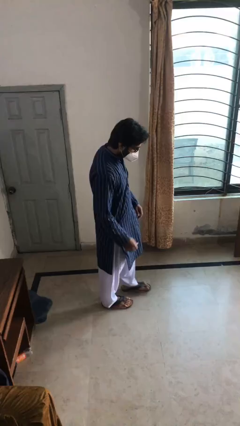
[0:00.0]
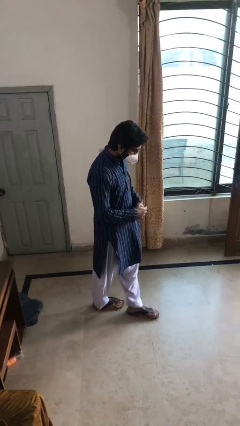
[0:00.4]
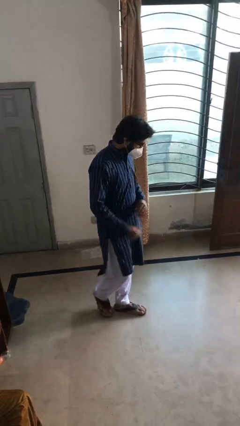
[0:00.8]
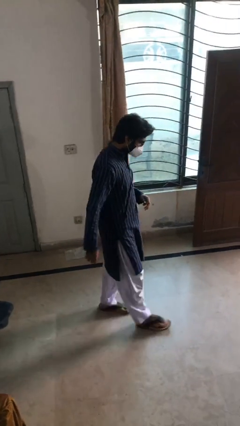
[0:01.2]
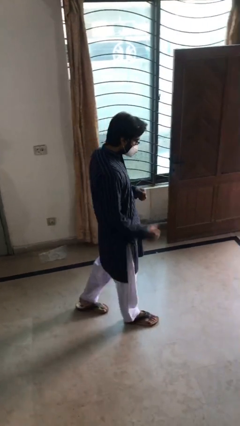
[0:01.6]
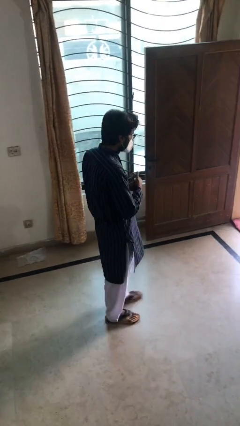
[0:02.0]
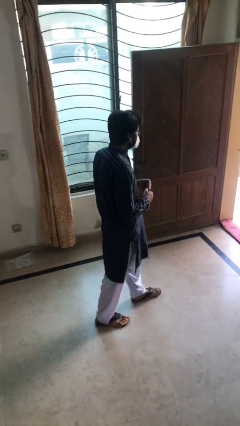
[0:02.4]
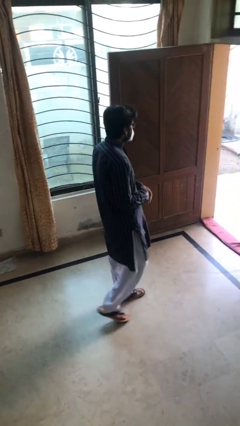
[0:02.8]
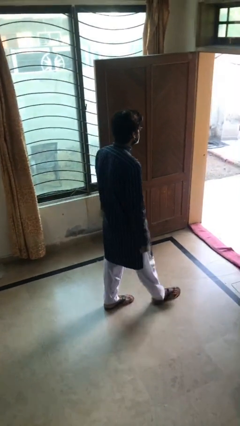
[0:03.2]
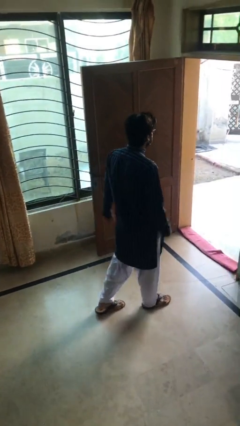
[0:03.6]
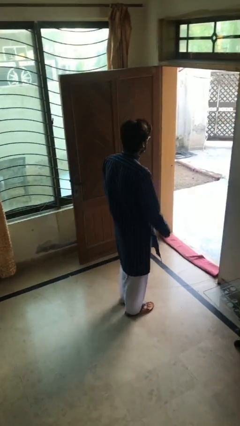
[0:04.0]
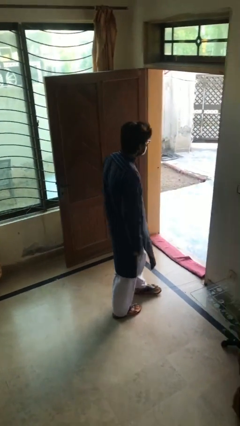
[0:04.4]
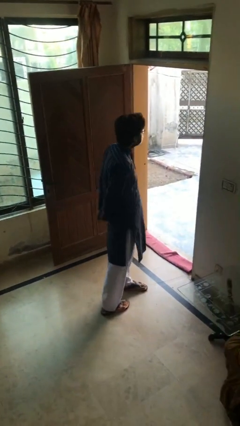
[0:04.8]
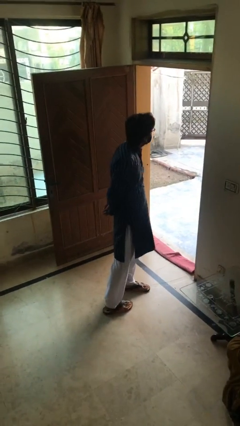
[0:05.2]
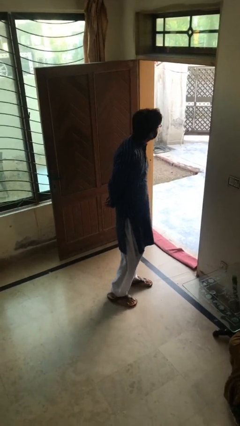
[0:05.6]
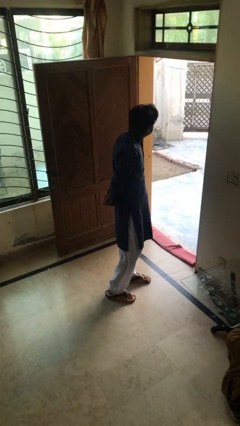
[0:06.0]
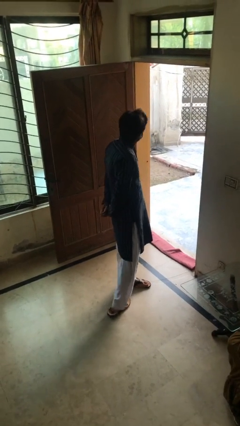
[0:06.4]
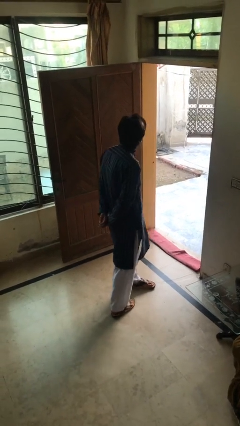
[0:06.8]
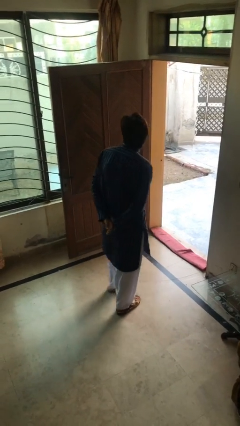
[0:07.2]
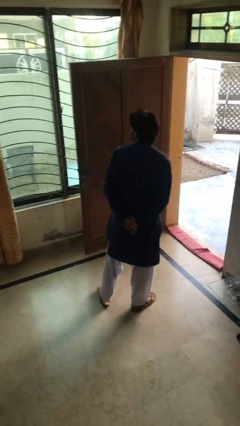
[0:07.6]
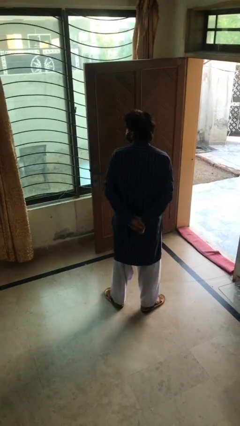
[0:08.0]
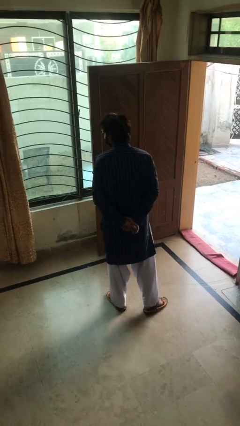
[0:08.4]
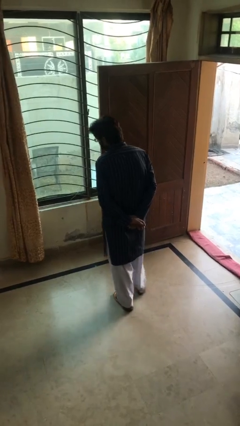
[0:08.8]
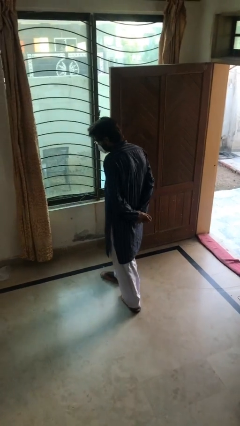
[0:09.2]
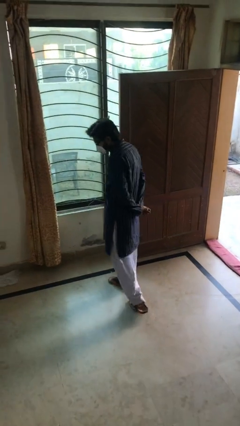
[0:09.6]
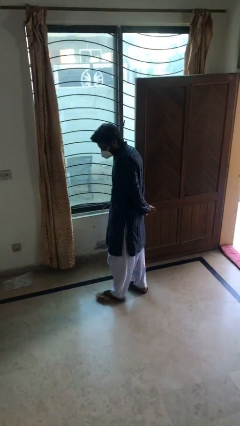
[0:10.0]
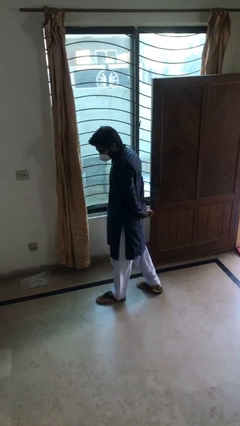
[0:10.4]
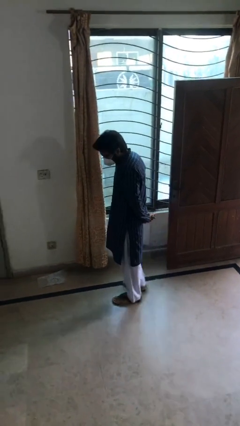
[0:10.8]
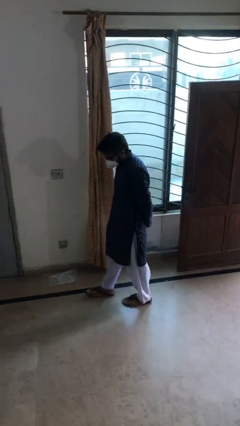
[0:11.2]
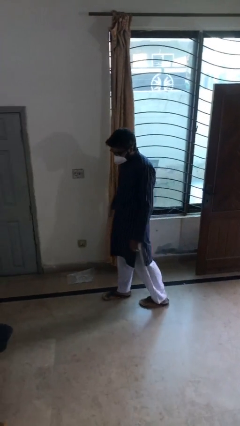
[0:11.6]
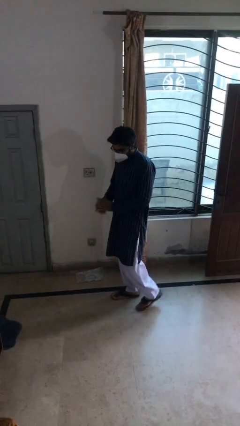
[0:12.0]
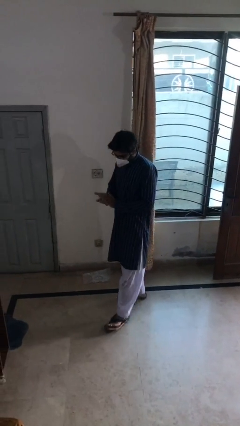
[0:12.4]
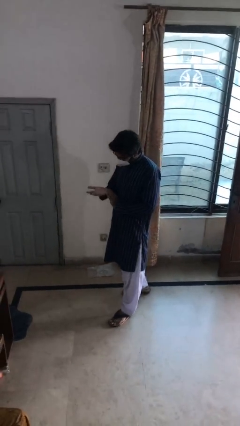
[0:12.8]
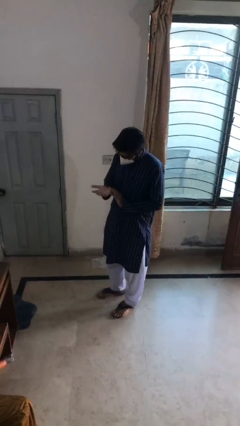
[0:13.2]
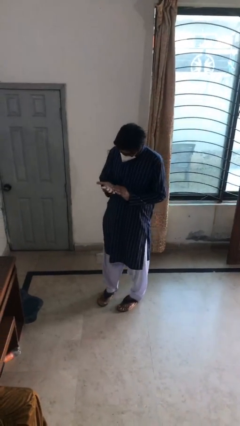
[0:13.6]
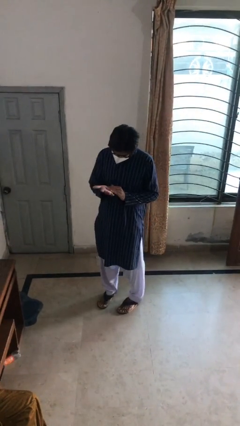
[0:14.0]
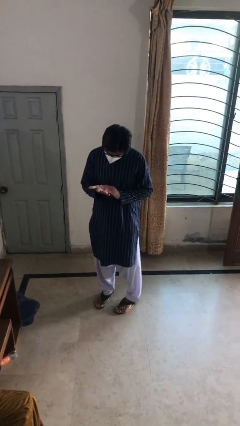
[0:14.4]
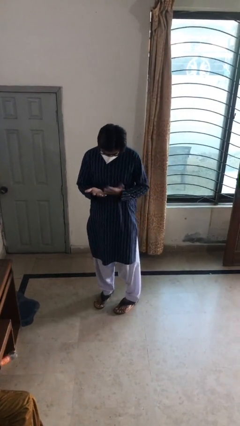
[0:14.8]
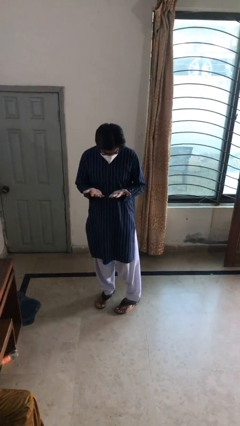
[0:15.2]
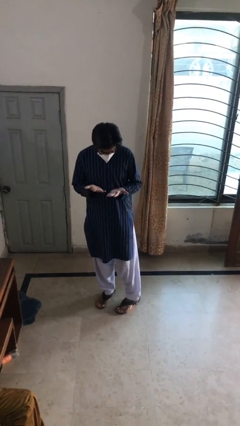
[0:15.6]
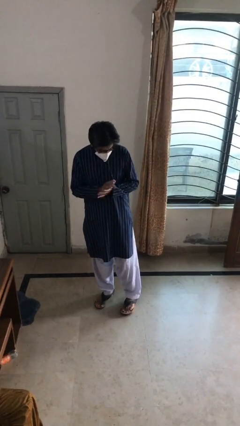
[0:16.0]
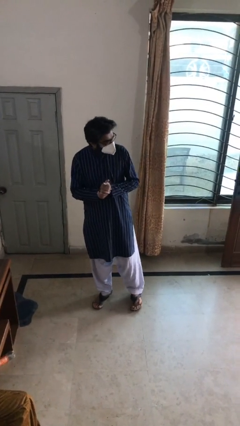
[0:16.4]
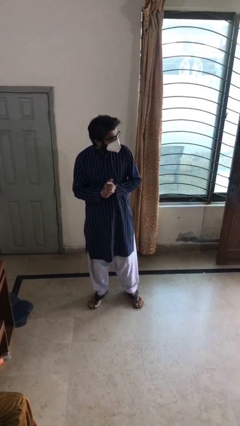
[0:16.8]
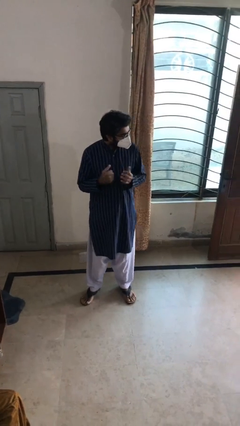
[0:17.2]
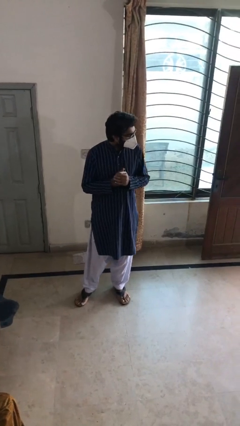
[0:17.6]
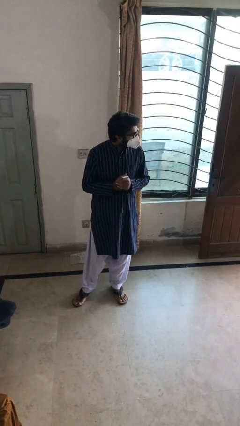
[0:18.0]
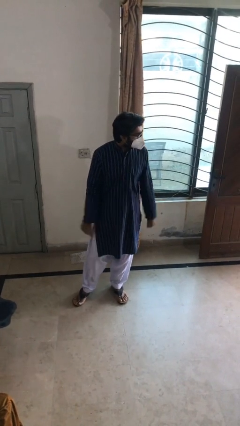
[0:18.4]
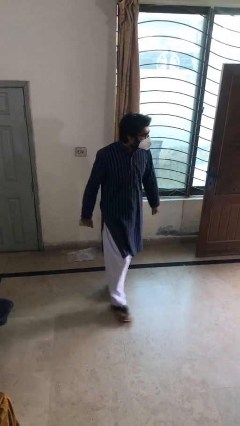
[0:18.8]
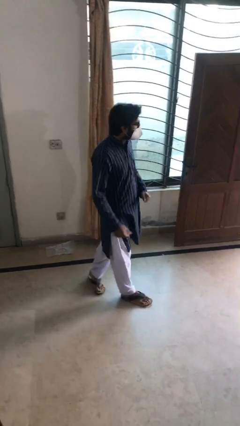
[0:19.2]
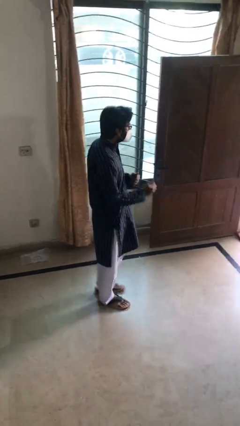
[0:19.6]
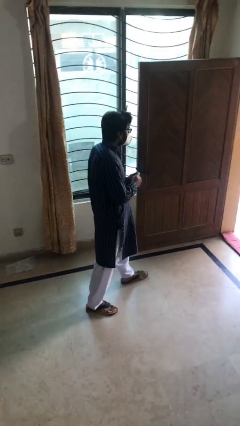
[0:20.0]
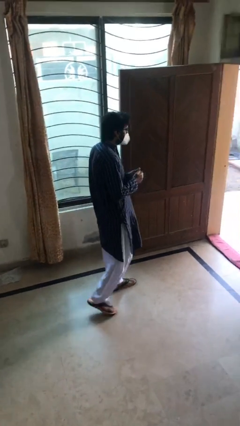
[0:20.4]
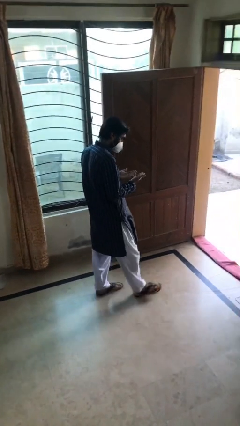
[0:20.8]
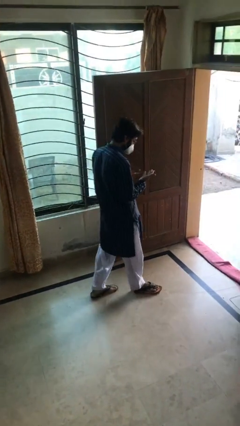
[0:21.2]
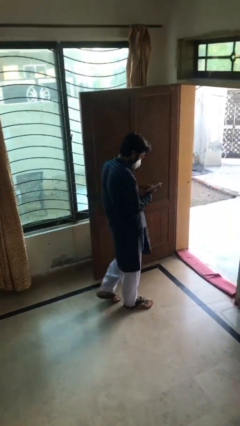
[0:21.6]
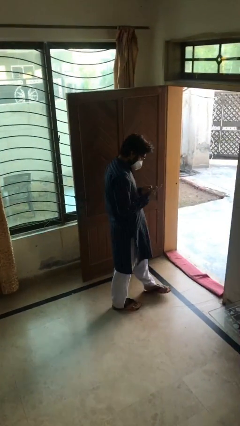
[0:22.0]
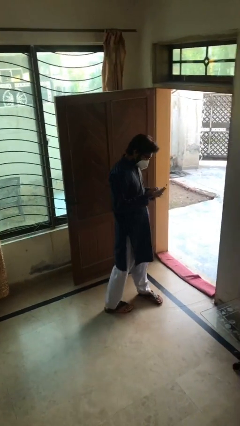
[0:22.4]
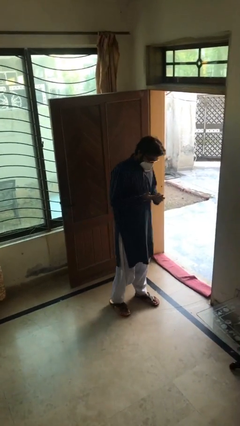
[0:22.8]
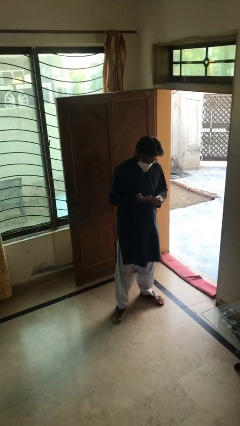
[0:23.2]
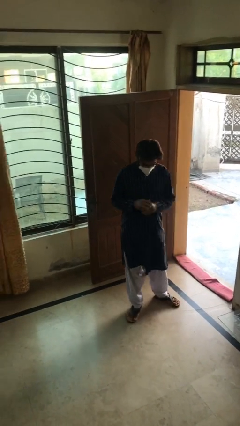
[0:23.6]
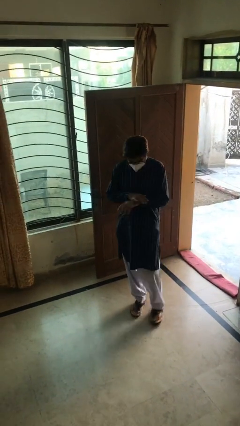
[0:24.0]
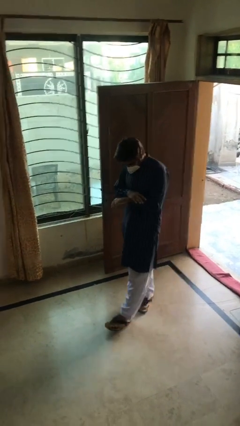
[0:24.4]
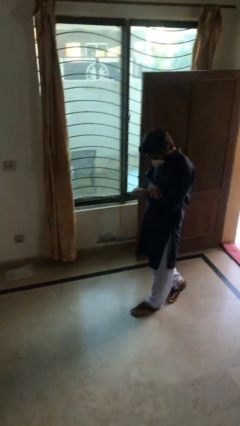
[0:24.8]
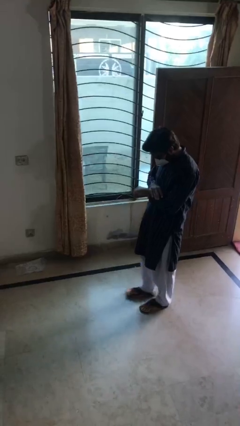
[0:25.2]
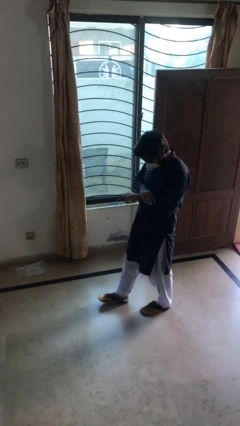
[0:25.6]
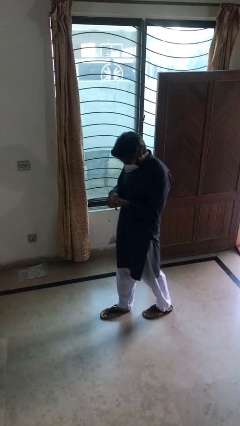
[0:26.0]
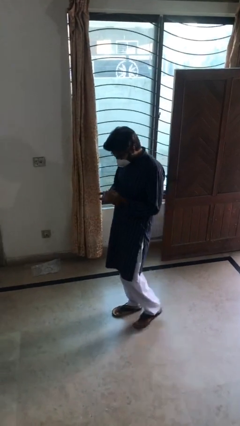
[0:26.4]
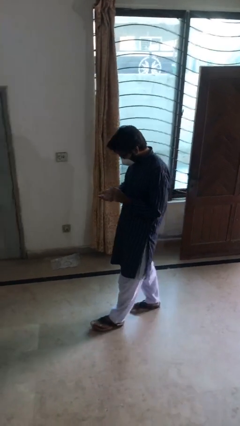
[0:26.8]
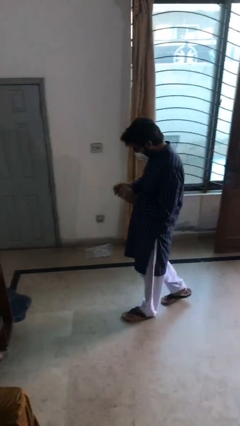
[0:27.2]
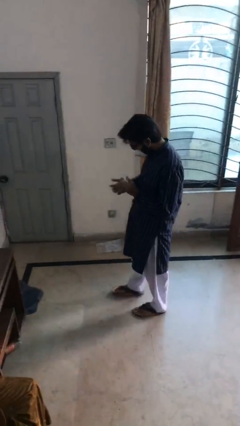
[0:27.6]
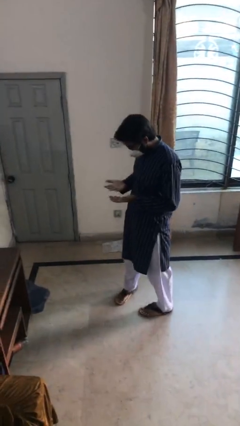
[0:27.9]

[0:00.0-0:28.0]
person walks

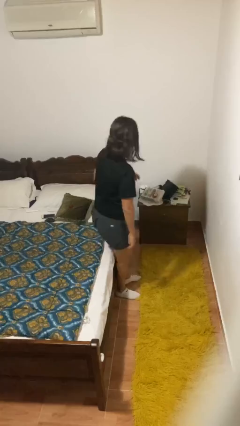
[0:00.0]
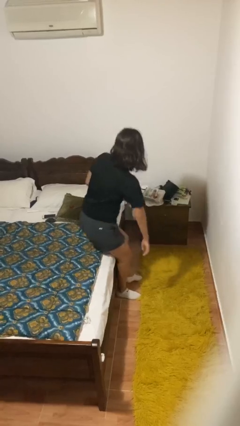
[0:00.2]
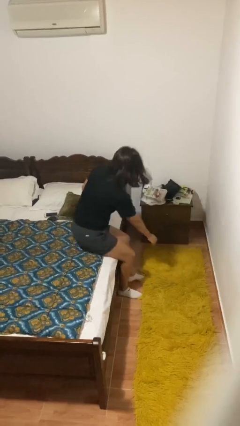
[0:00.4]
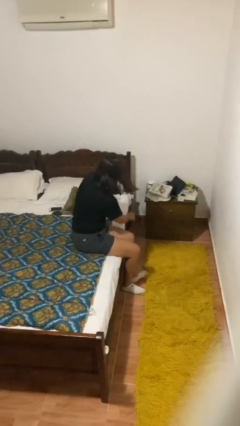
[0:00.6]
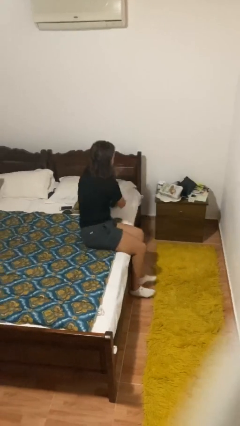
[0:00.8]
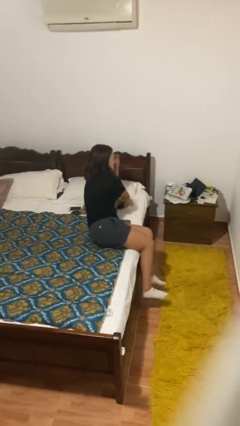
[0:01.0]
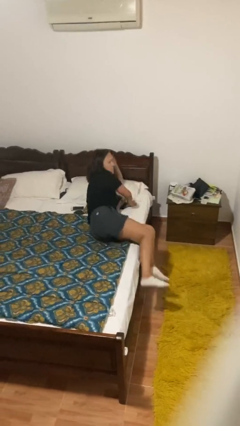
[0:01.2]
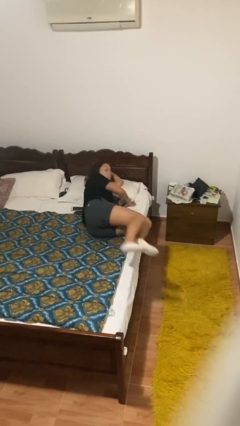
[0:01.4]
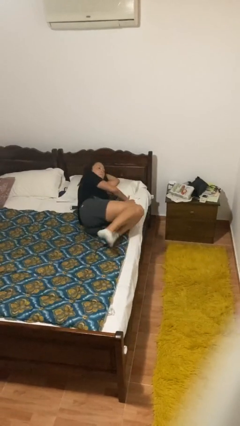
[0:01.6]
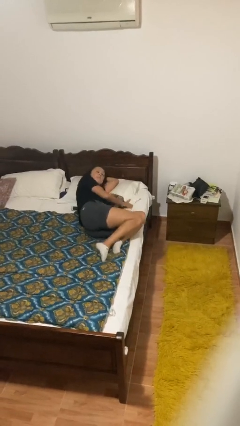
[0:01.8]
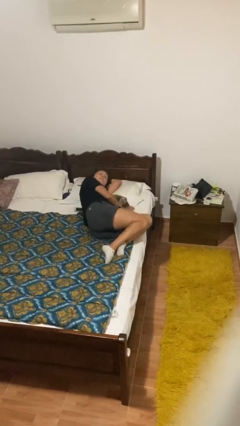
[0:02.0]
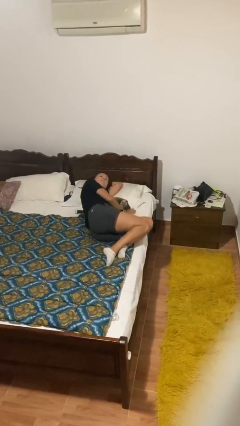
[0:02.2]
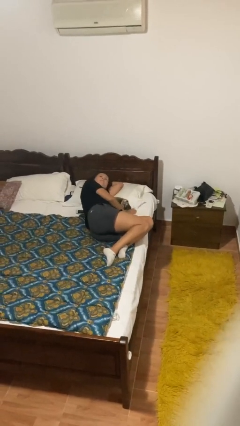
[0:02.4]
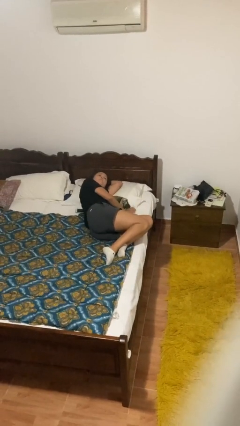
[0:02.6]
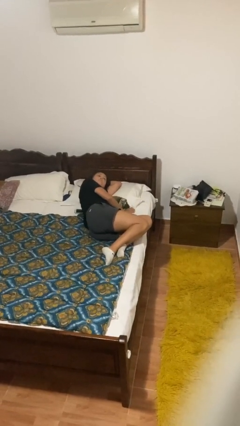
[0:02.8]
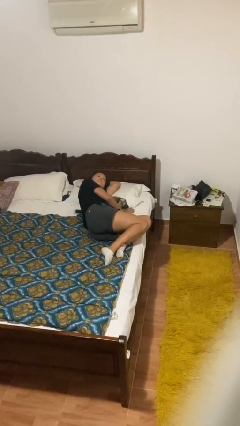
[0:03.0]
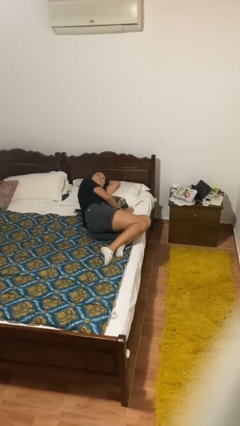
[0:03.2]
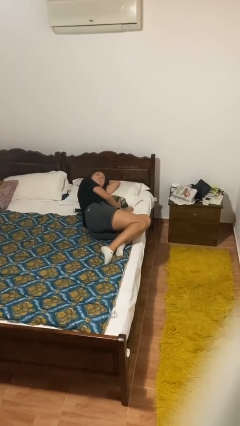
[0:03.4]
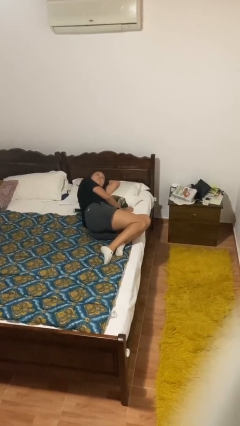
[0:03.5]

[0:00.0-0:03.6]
person lies down on bed

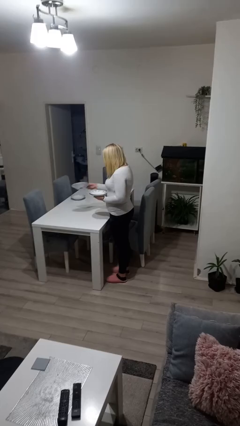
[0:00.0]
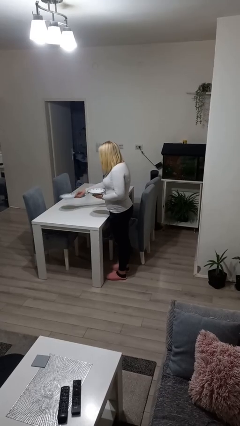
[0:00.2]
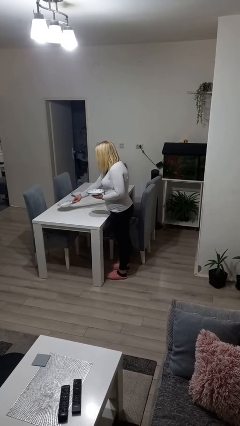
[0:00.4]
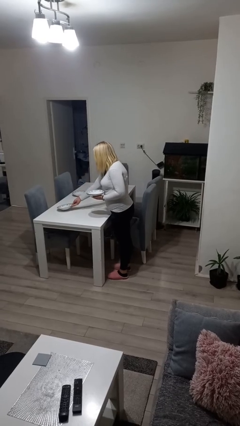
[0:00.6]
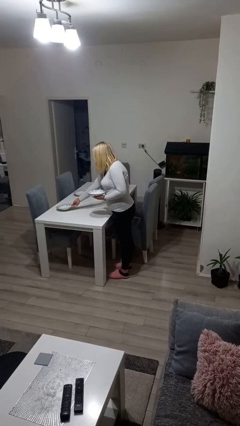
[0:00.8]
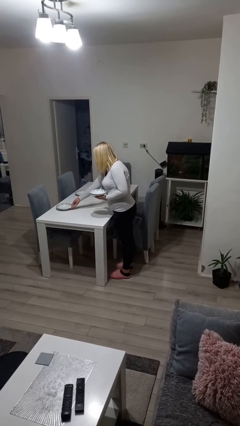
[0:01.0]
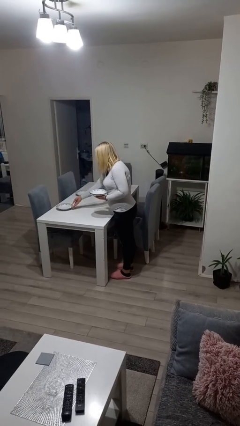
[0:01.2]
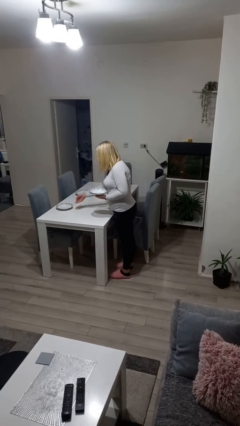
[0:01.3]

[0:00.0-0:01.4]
person sets table
